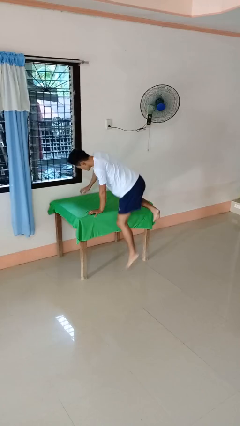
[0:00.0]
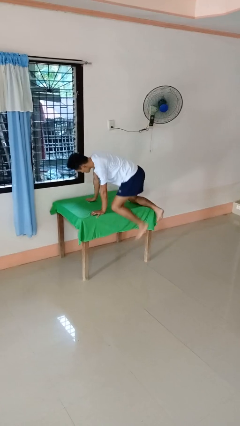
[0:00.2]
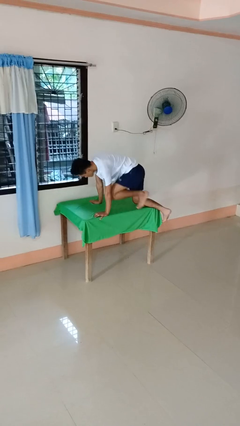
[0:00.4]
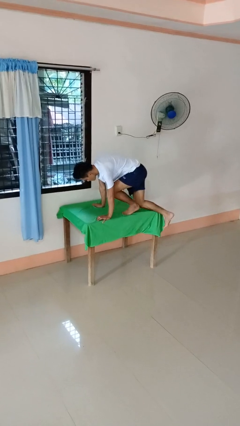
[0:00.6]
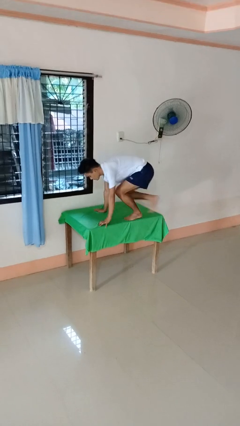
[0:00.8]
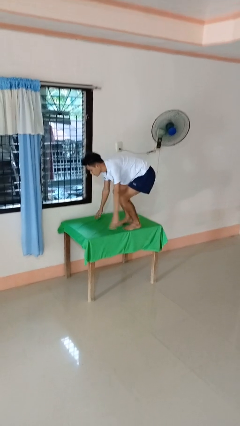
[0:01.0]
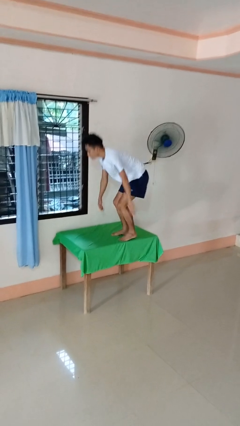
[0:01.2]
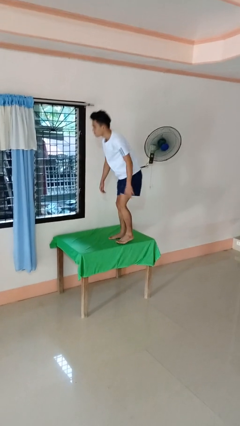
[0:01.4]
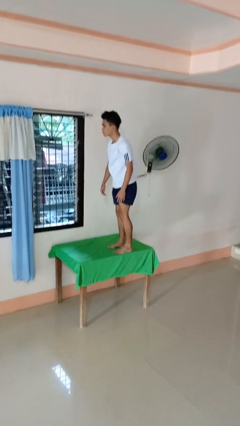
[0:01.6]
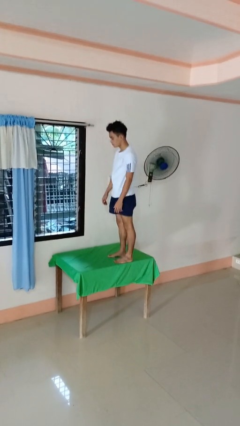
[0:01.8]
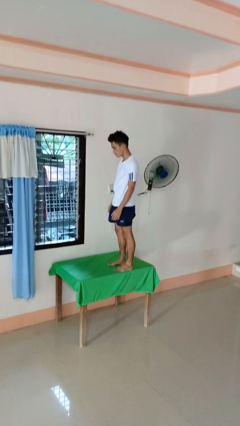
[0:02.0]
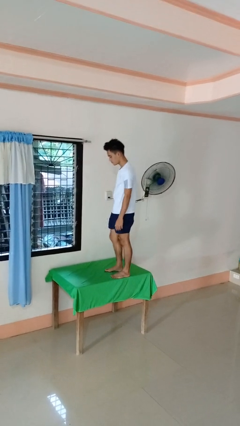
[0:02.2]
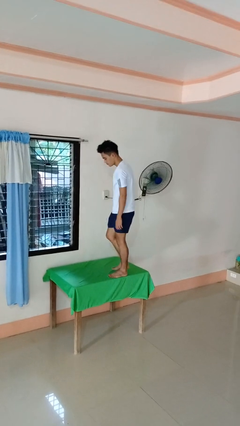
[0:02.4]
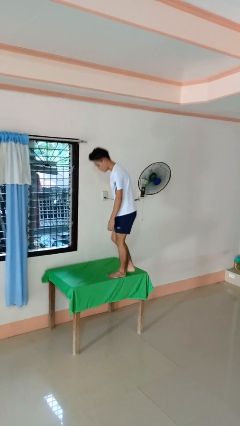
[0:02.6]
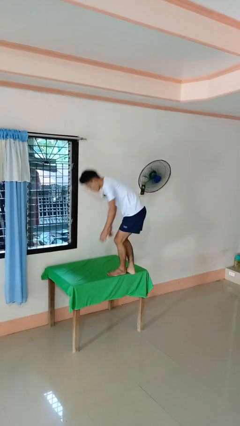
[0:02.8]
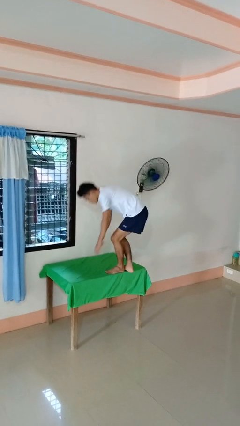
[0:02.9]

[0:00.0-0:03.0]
person climbs on table

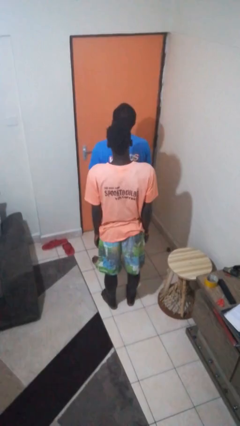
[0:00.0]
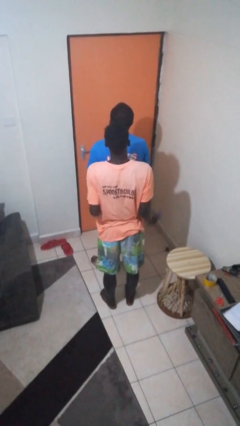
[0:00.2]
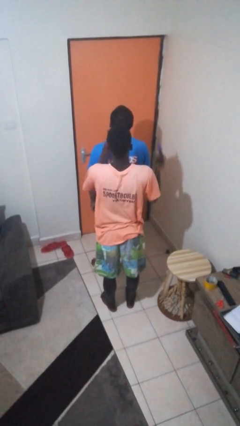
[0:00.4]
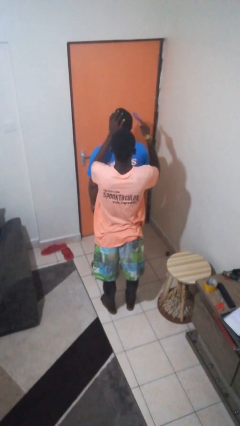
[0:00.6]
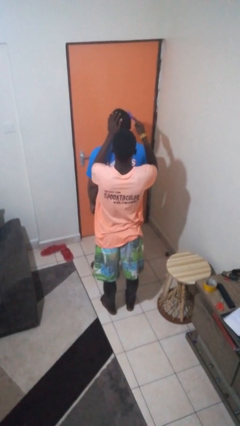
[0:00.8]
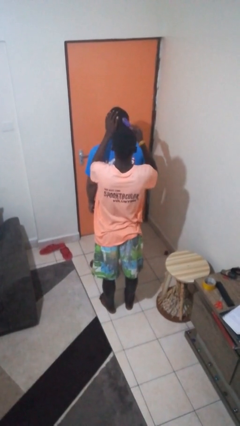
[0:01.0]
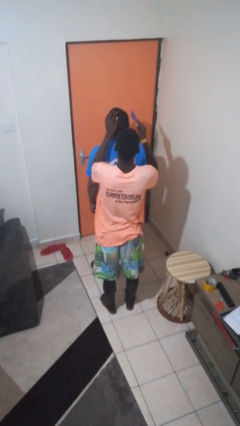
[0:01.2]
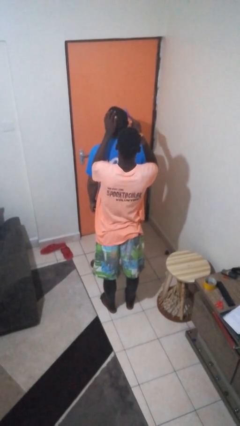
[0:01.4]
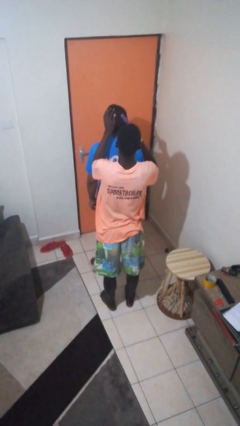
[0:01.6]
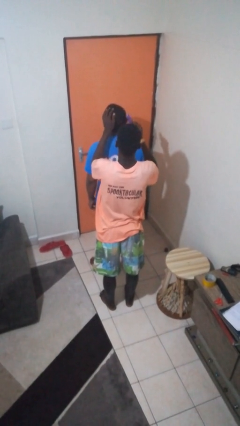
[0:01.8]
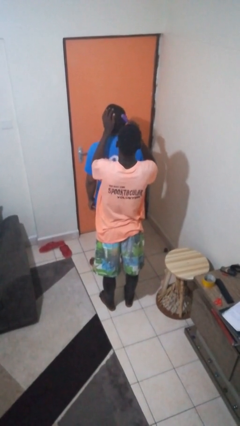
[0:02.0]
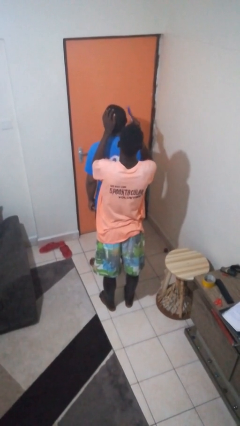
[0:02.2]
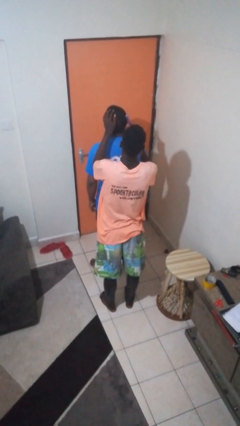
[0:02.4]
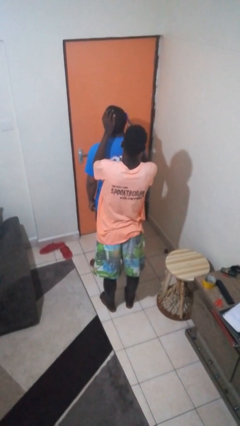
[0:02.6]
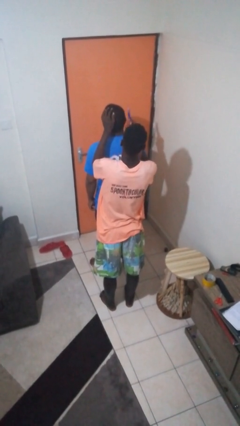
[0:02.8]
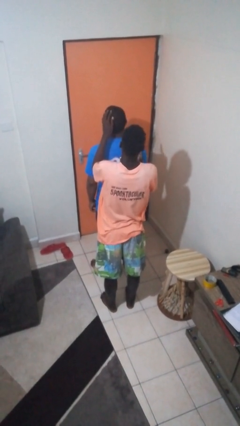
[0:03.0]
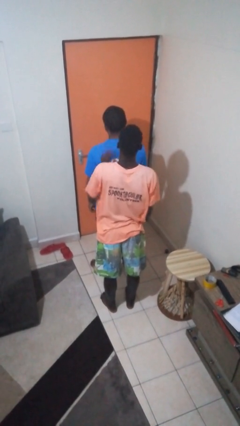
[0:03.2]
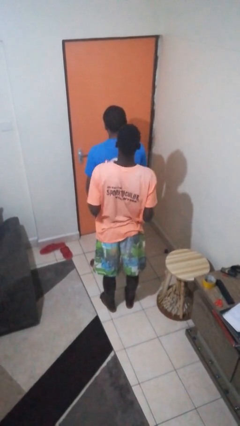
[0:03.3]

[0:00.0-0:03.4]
person brushes hair of person

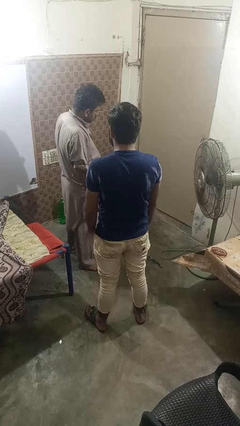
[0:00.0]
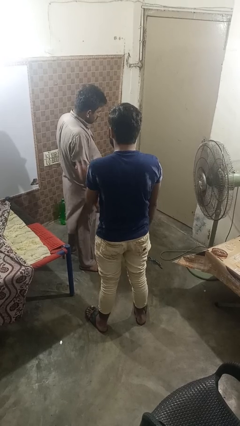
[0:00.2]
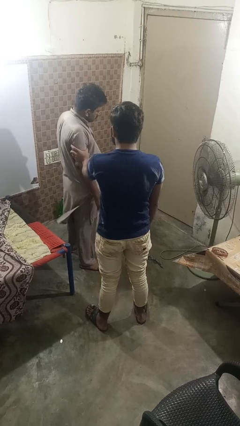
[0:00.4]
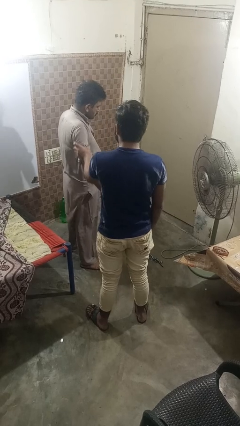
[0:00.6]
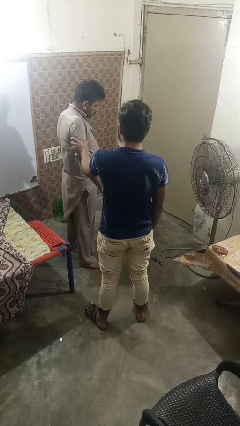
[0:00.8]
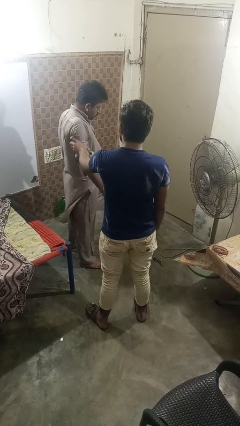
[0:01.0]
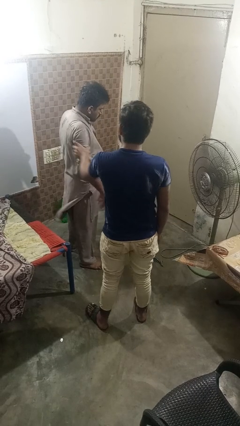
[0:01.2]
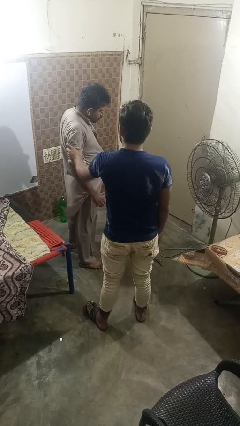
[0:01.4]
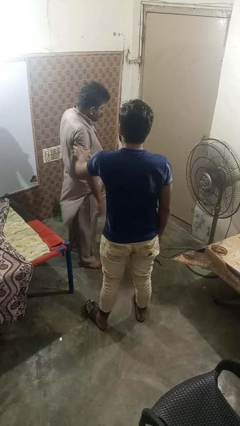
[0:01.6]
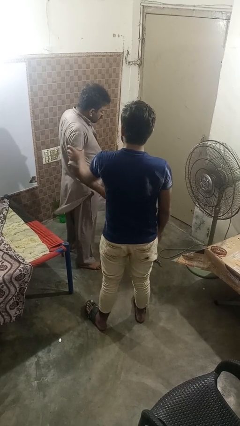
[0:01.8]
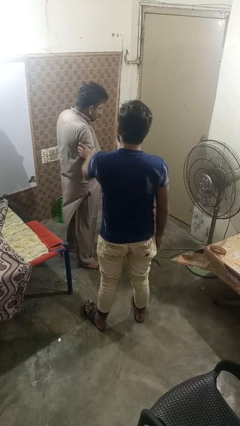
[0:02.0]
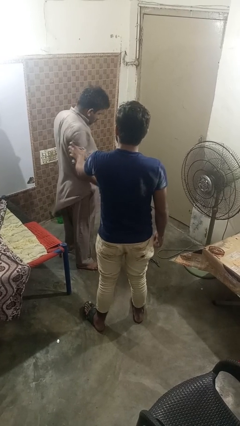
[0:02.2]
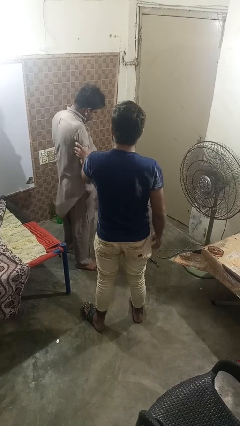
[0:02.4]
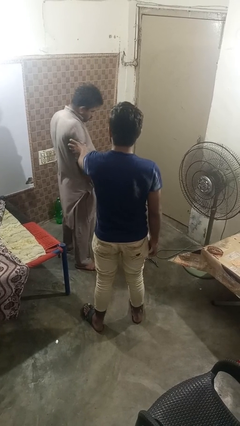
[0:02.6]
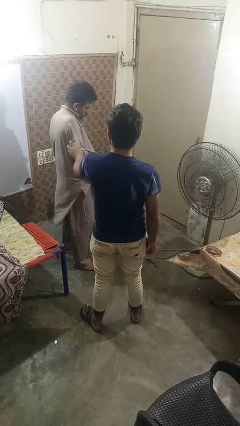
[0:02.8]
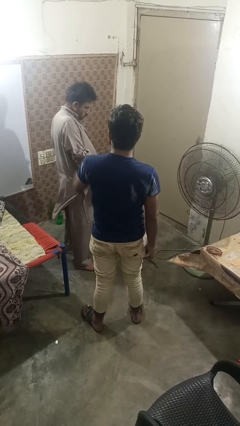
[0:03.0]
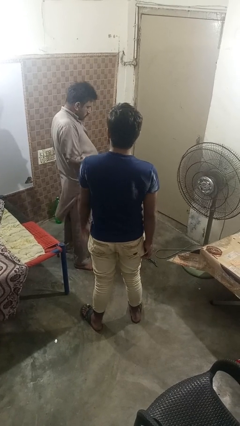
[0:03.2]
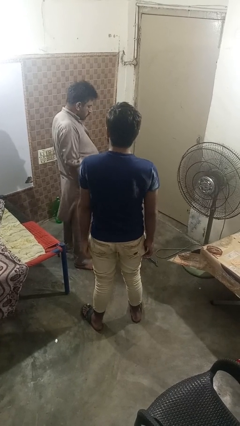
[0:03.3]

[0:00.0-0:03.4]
person grabs person by bicep

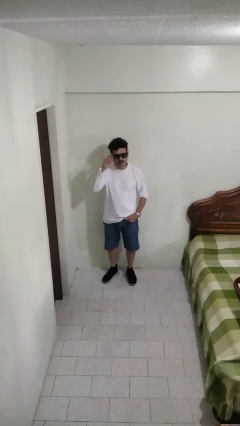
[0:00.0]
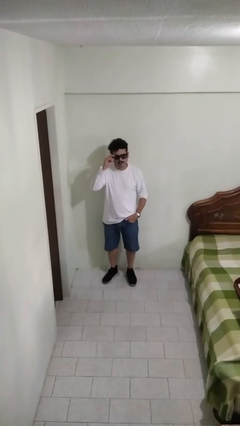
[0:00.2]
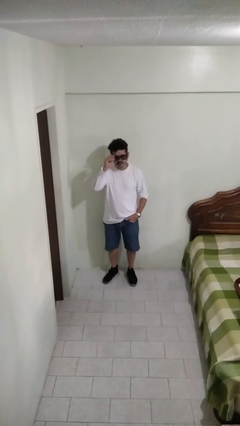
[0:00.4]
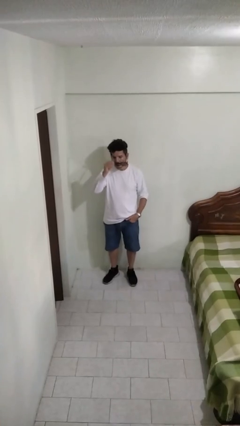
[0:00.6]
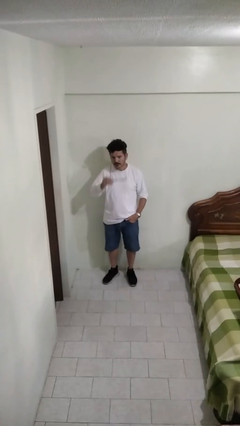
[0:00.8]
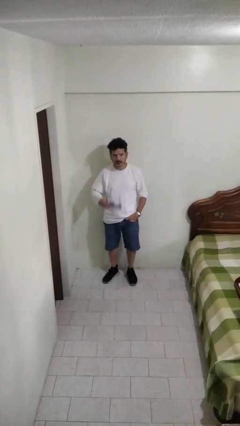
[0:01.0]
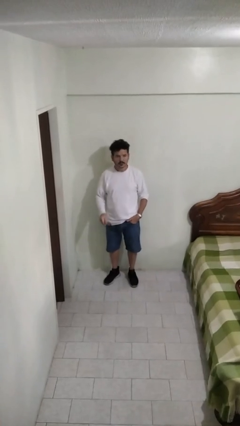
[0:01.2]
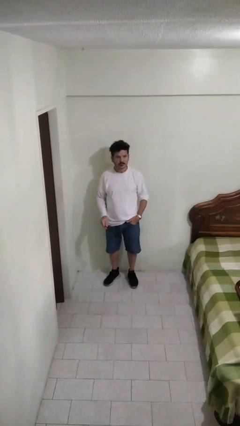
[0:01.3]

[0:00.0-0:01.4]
person takes off sunglasses

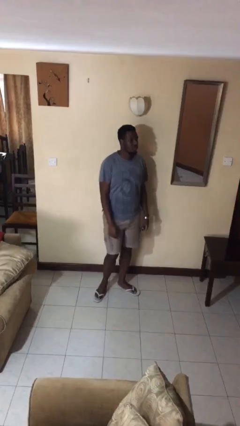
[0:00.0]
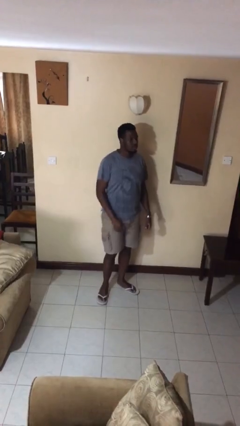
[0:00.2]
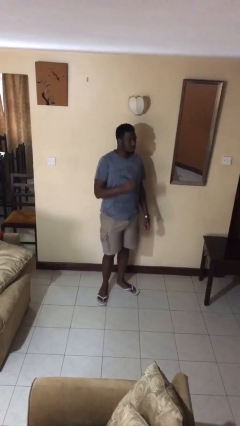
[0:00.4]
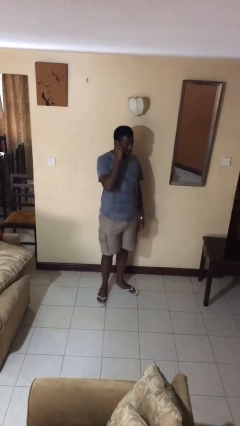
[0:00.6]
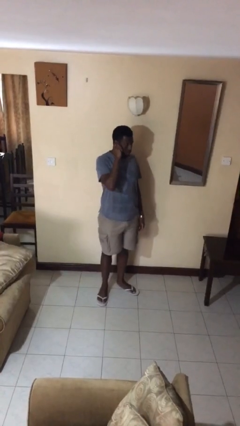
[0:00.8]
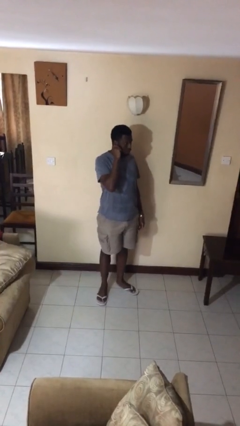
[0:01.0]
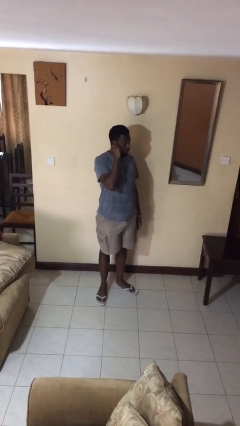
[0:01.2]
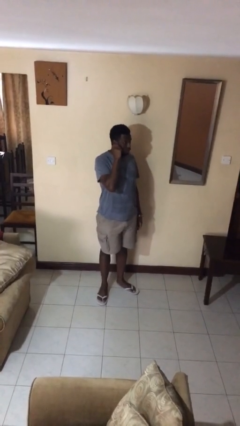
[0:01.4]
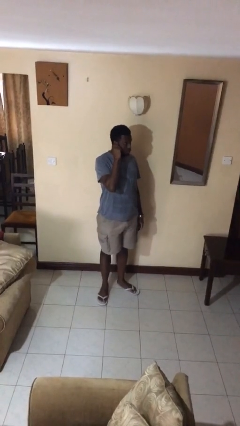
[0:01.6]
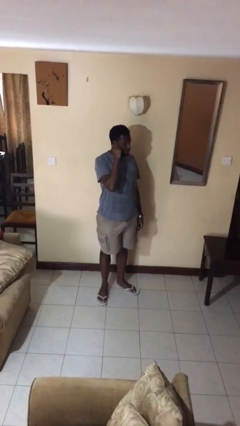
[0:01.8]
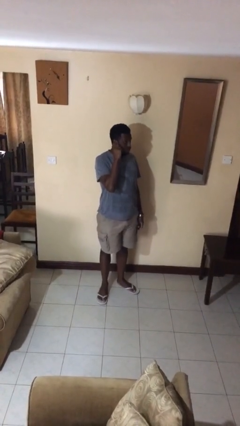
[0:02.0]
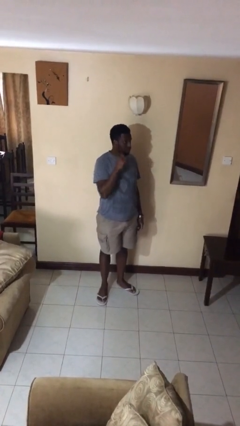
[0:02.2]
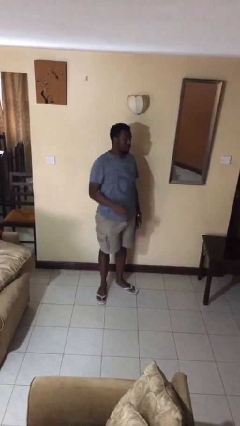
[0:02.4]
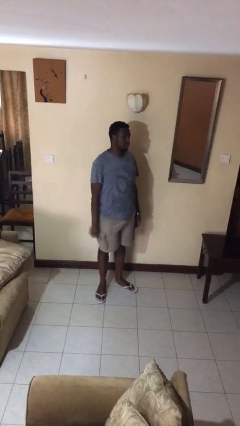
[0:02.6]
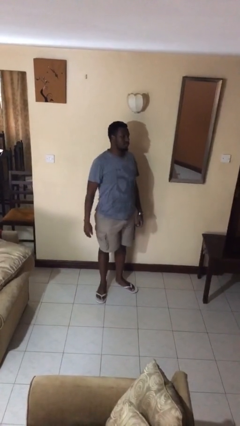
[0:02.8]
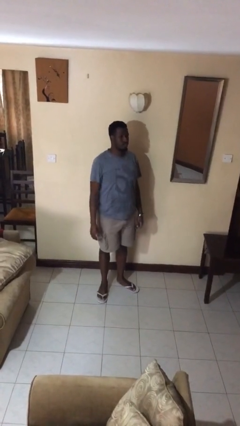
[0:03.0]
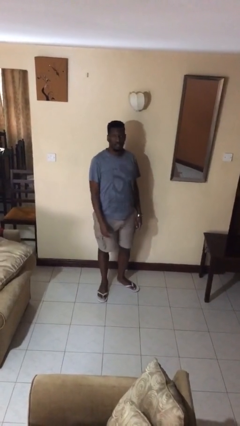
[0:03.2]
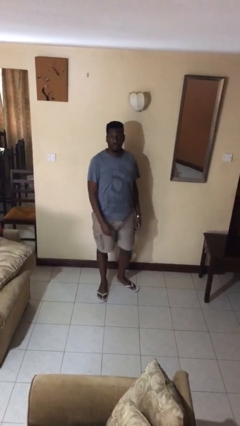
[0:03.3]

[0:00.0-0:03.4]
person touches earlobe

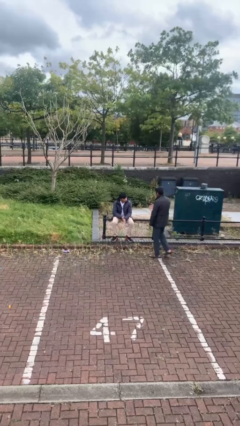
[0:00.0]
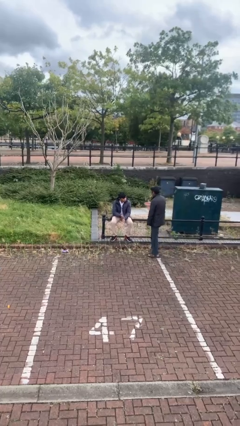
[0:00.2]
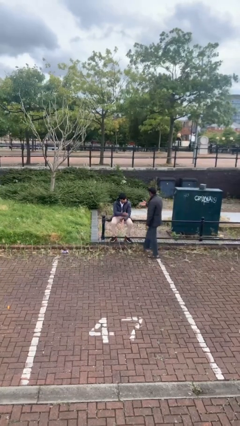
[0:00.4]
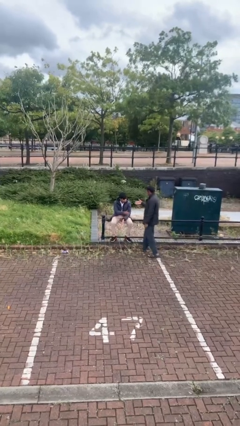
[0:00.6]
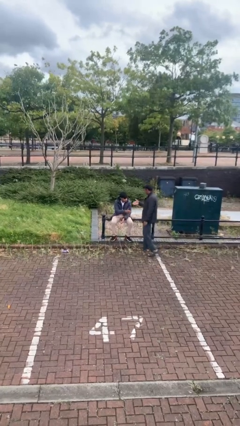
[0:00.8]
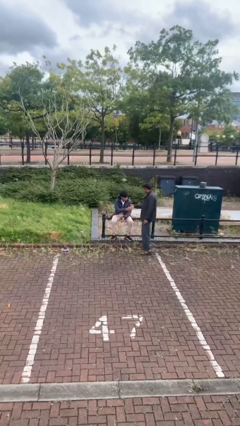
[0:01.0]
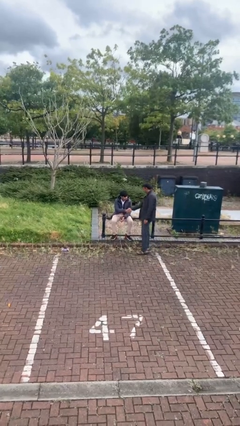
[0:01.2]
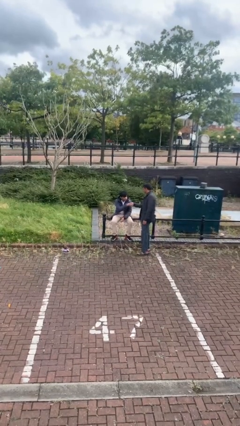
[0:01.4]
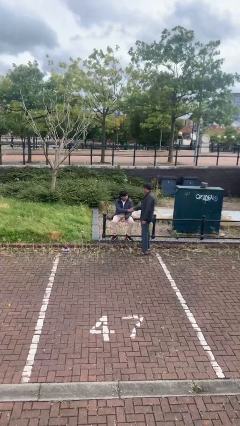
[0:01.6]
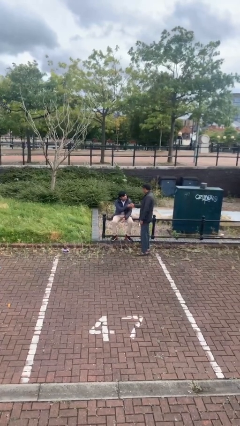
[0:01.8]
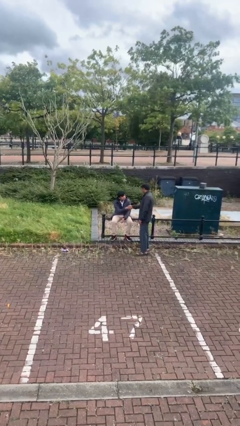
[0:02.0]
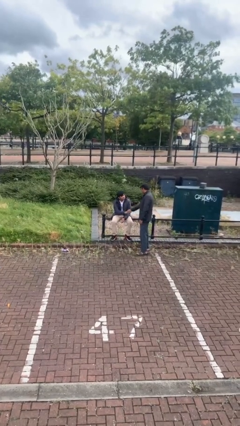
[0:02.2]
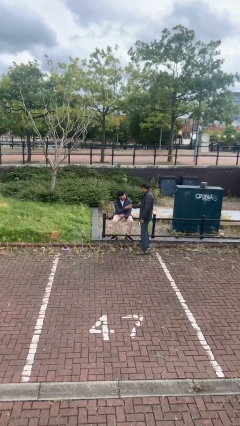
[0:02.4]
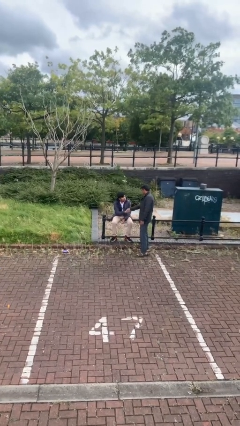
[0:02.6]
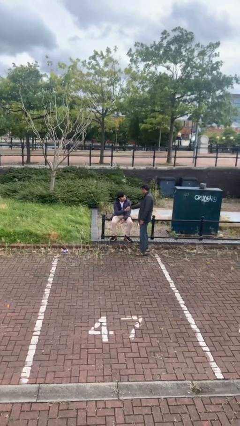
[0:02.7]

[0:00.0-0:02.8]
person shakes hand
